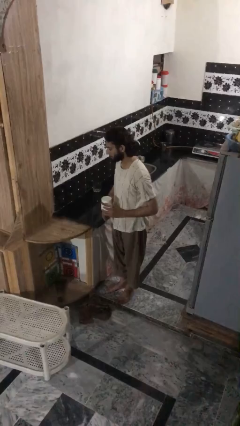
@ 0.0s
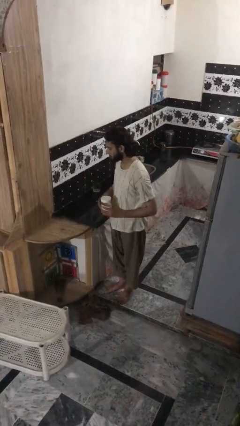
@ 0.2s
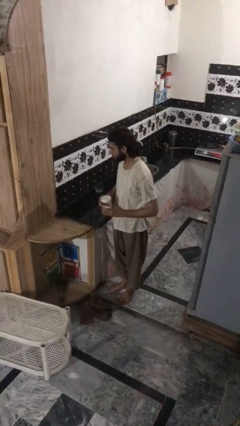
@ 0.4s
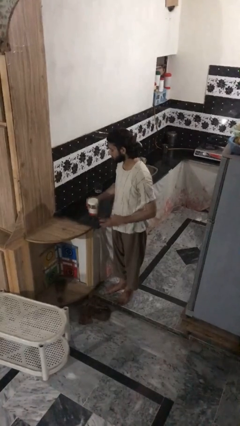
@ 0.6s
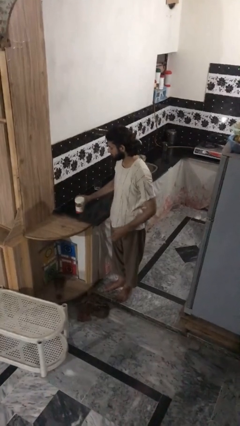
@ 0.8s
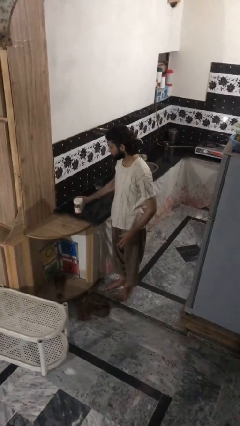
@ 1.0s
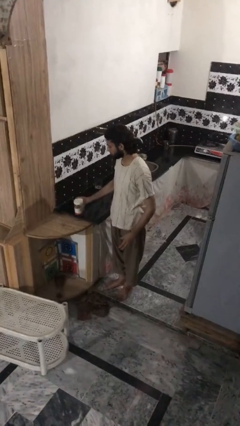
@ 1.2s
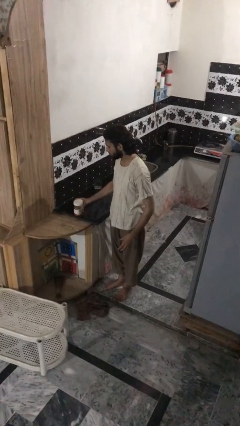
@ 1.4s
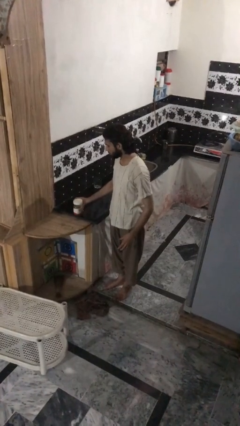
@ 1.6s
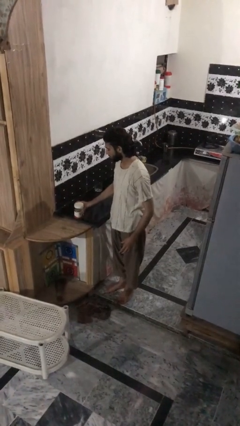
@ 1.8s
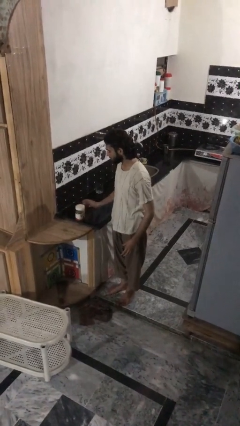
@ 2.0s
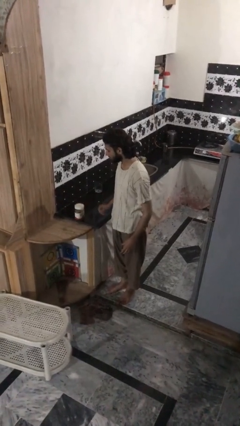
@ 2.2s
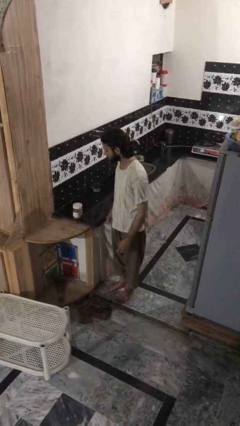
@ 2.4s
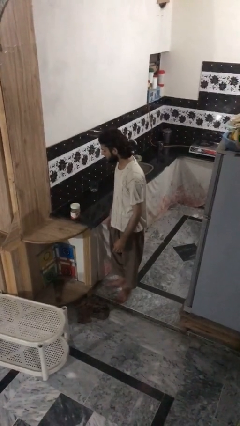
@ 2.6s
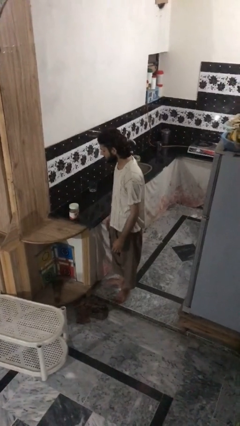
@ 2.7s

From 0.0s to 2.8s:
person puts down object on countertop

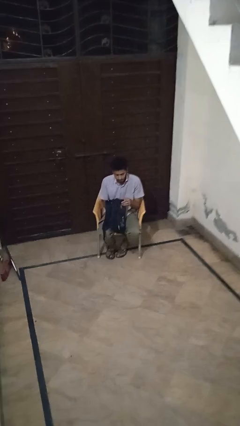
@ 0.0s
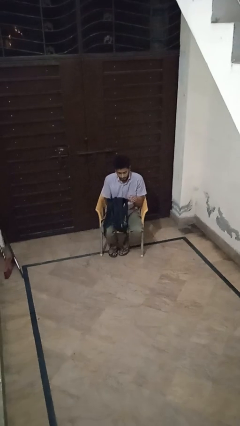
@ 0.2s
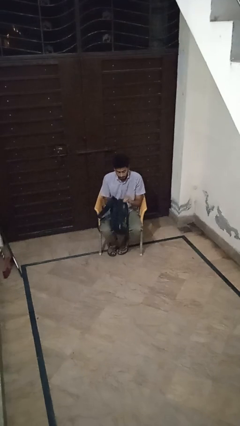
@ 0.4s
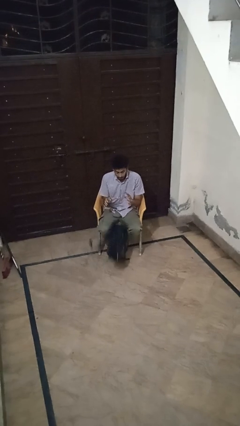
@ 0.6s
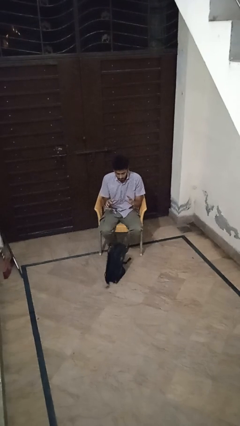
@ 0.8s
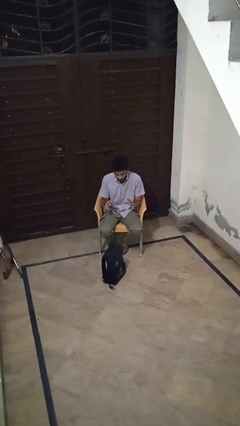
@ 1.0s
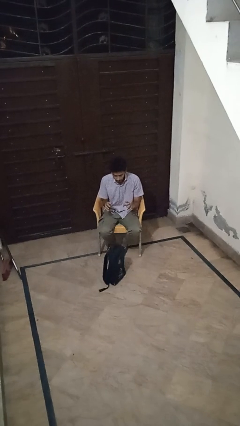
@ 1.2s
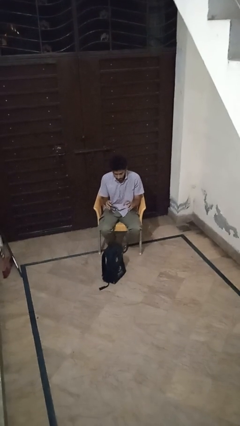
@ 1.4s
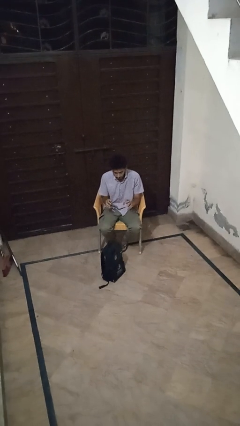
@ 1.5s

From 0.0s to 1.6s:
person drops object

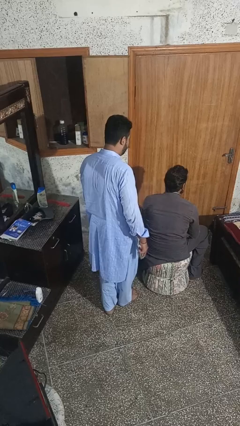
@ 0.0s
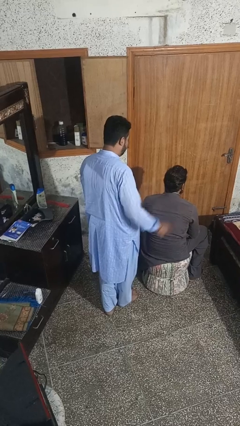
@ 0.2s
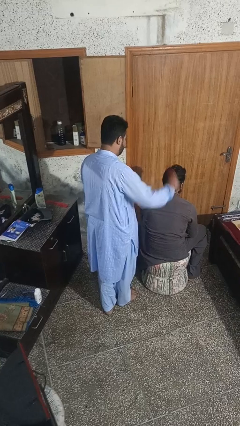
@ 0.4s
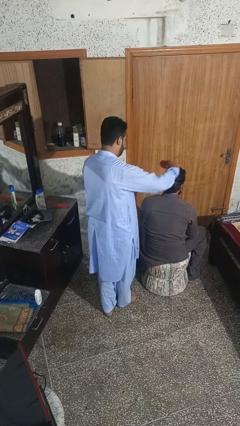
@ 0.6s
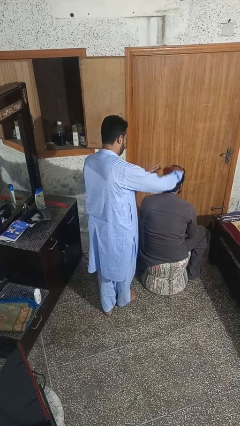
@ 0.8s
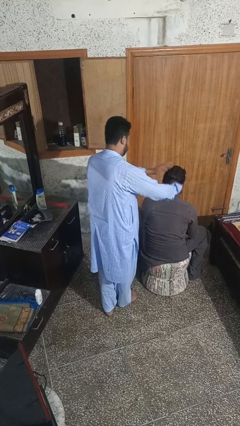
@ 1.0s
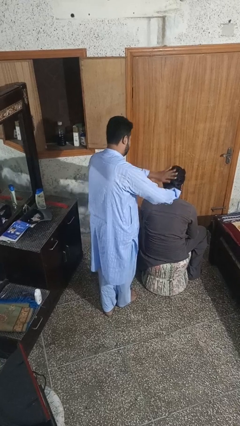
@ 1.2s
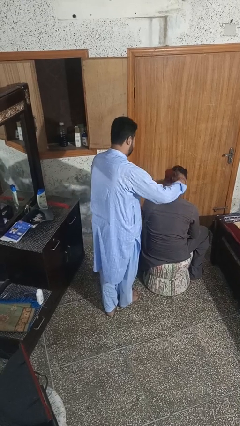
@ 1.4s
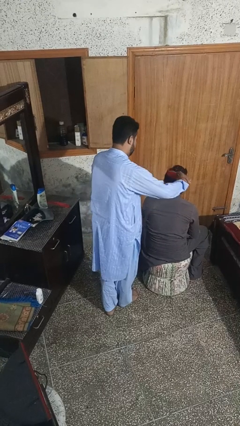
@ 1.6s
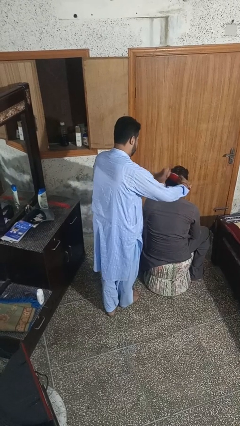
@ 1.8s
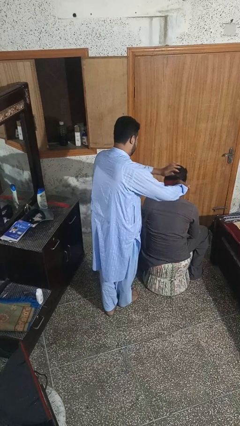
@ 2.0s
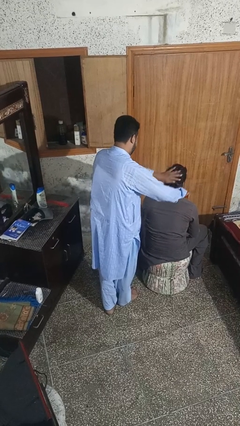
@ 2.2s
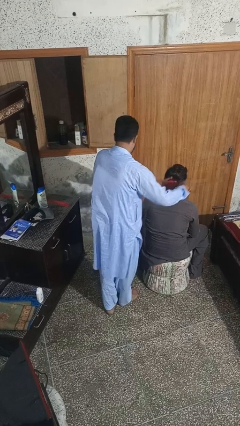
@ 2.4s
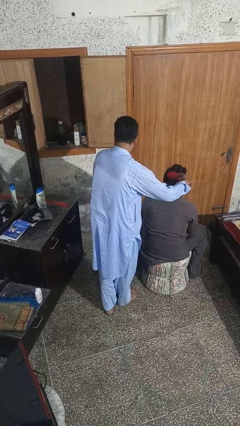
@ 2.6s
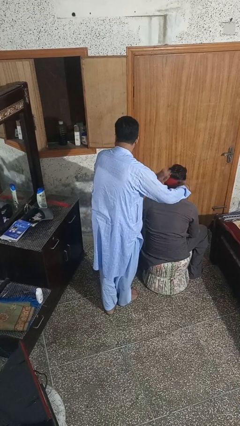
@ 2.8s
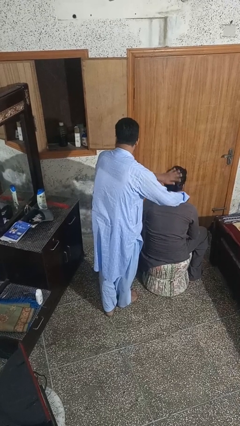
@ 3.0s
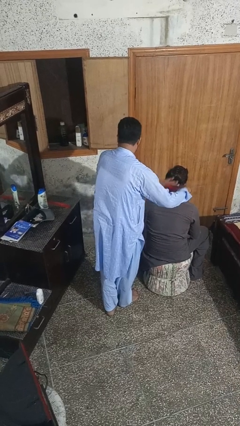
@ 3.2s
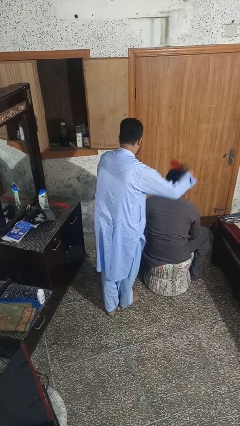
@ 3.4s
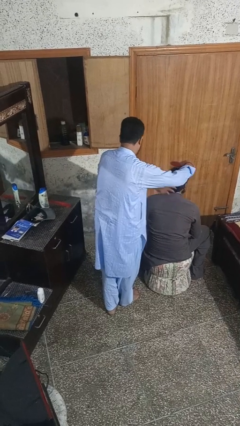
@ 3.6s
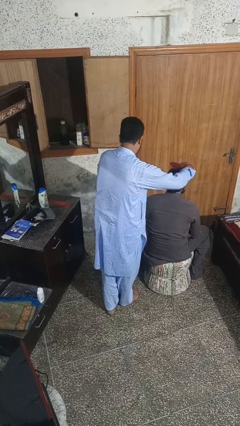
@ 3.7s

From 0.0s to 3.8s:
person brushes hair of person

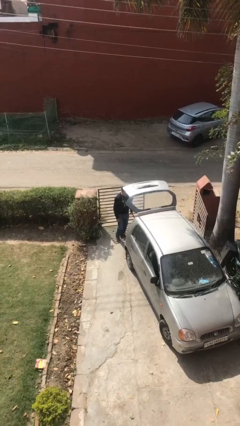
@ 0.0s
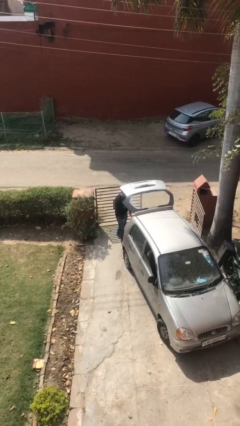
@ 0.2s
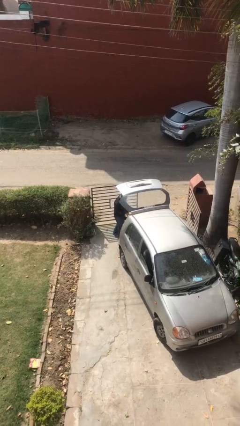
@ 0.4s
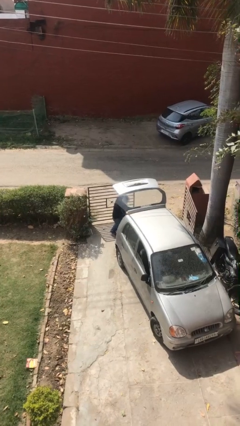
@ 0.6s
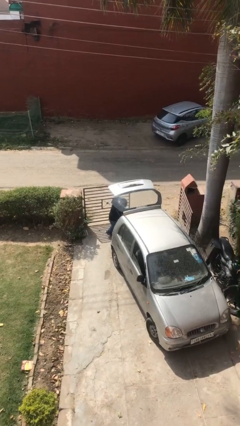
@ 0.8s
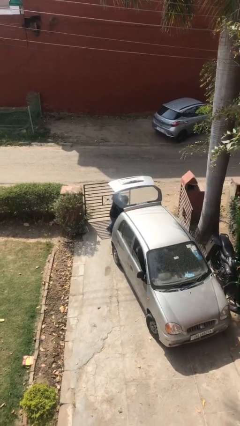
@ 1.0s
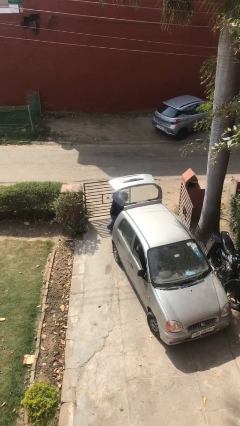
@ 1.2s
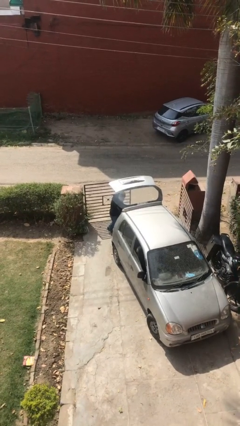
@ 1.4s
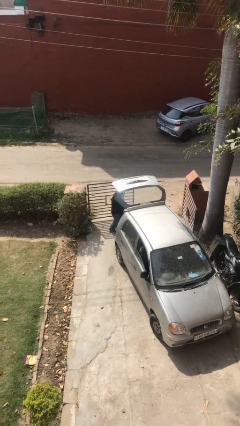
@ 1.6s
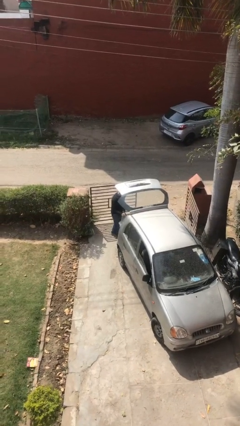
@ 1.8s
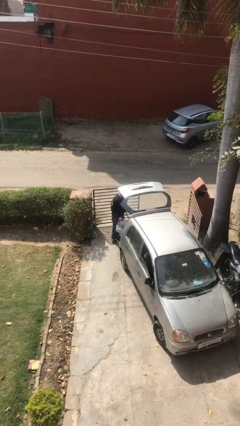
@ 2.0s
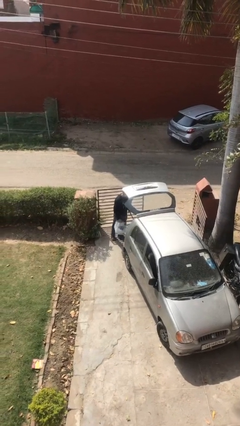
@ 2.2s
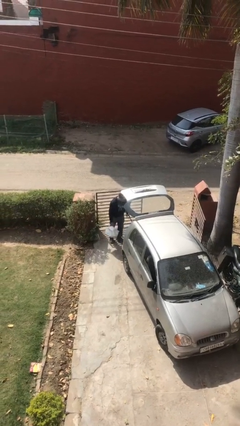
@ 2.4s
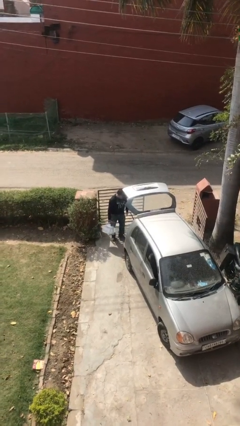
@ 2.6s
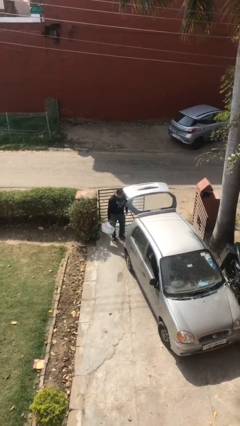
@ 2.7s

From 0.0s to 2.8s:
person unloads car

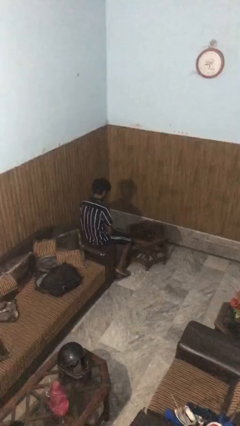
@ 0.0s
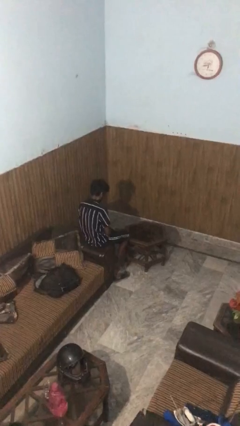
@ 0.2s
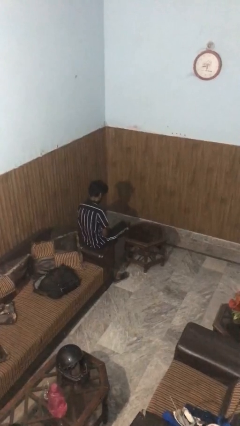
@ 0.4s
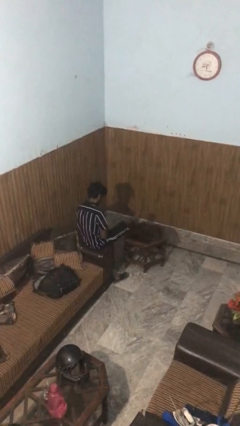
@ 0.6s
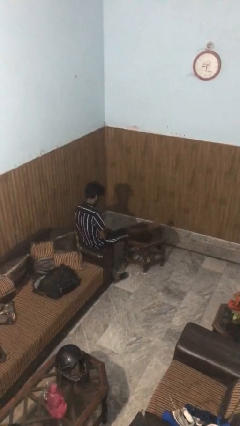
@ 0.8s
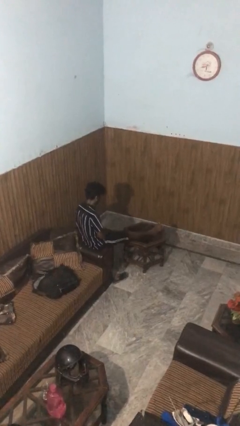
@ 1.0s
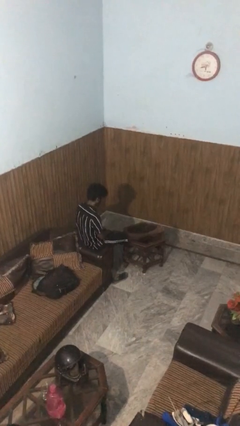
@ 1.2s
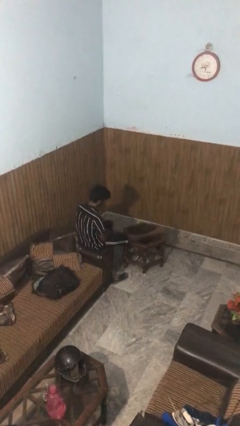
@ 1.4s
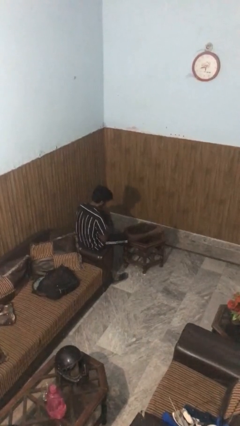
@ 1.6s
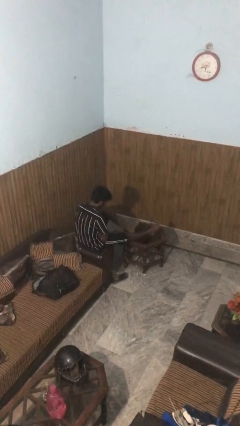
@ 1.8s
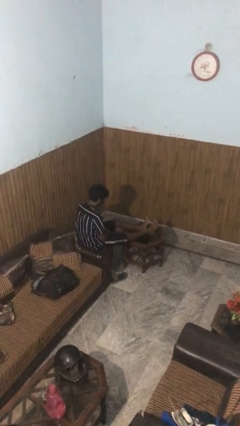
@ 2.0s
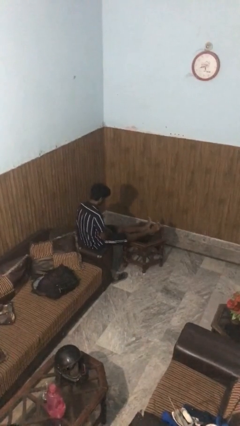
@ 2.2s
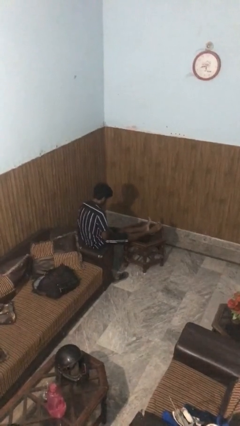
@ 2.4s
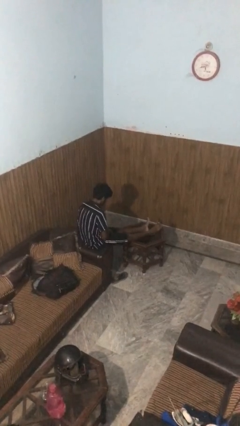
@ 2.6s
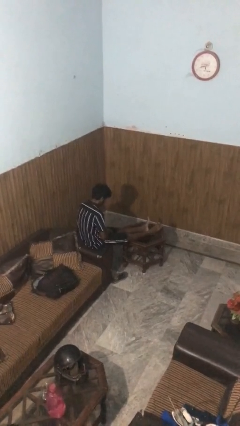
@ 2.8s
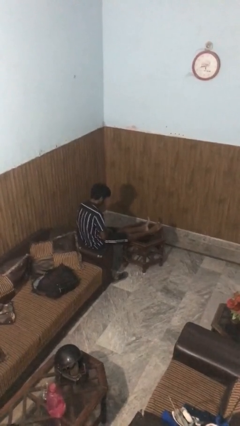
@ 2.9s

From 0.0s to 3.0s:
person puts feet up

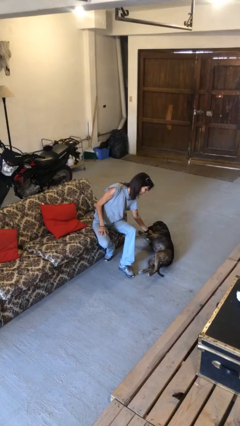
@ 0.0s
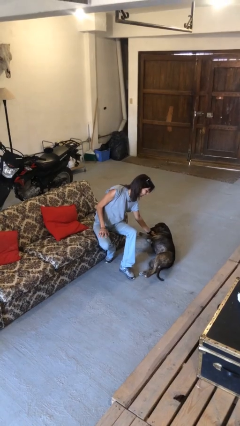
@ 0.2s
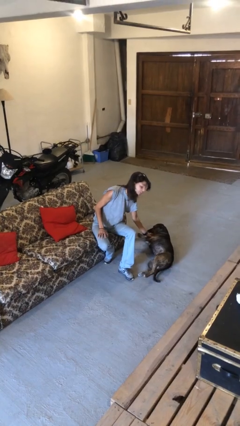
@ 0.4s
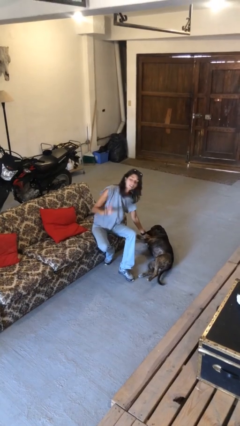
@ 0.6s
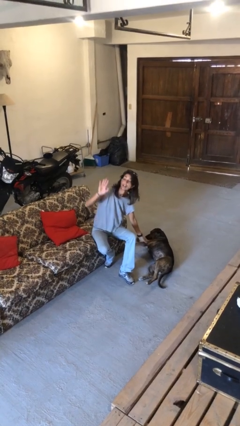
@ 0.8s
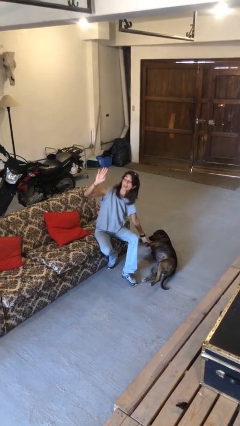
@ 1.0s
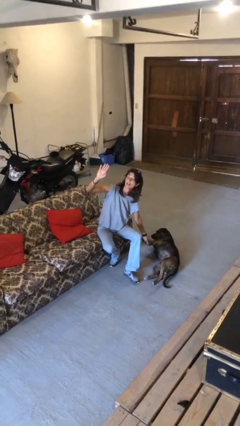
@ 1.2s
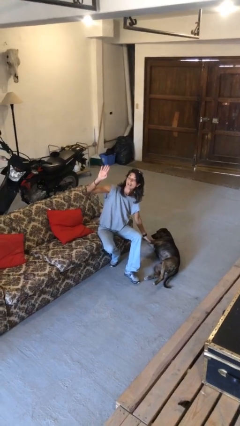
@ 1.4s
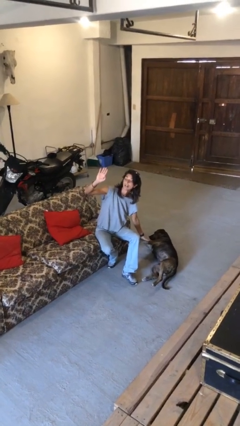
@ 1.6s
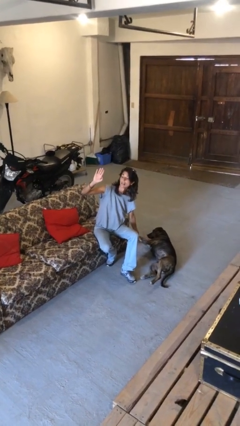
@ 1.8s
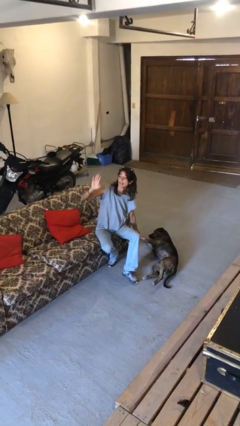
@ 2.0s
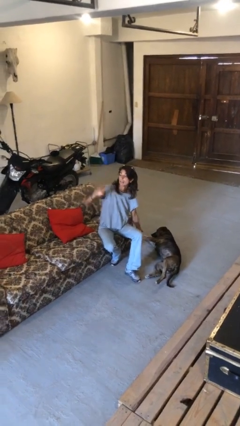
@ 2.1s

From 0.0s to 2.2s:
person gestures raise hand

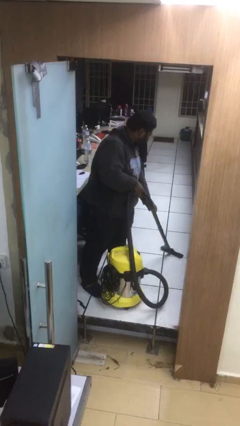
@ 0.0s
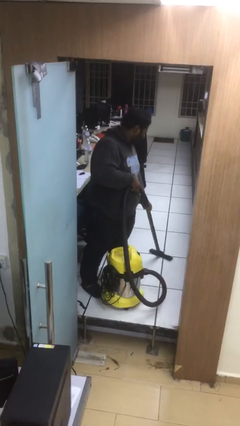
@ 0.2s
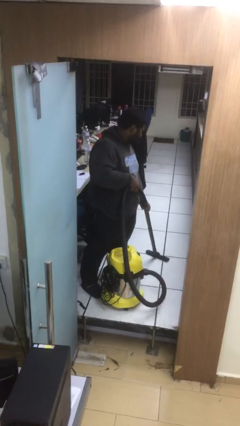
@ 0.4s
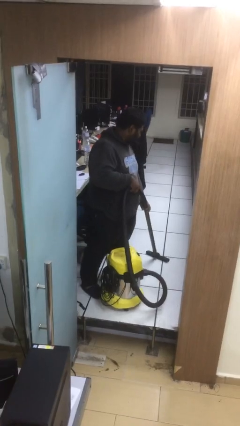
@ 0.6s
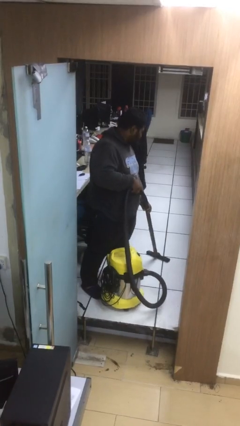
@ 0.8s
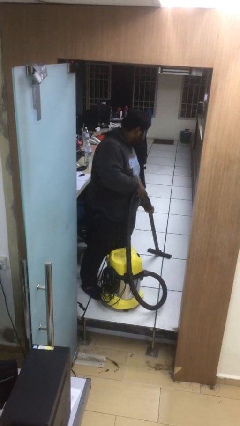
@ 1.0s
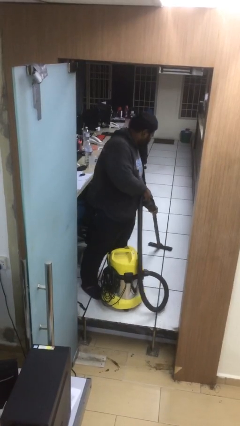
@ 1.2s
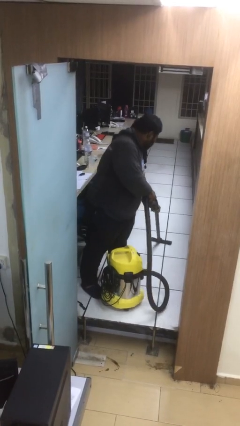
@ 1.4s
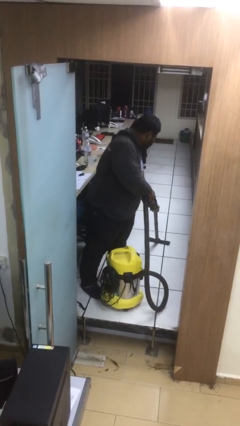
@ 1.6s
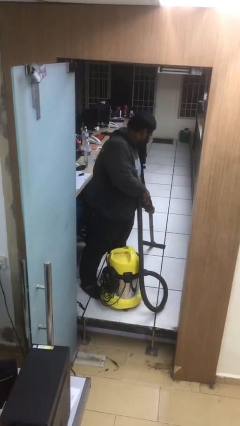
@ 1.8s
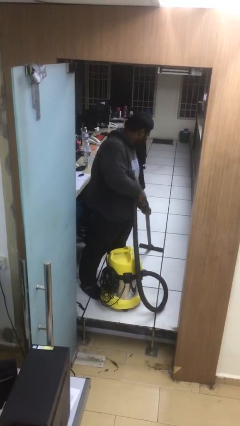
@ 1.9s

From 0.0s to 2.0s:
person vacuums carpet
